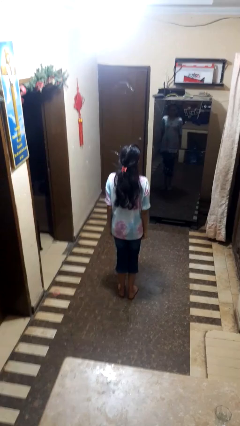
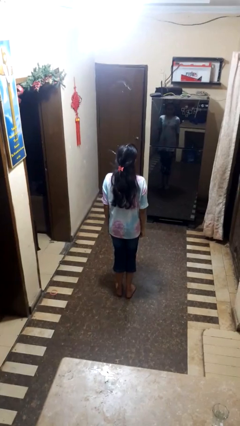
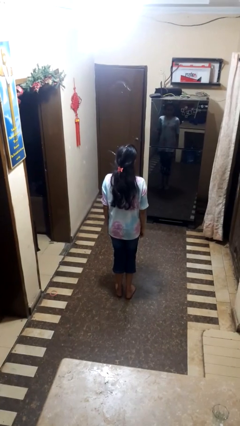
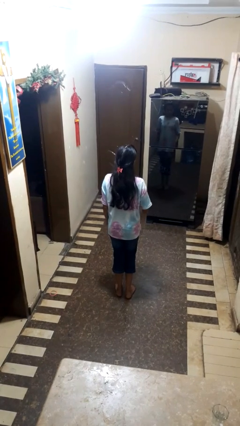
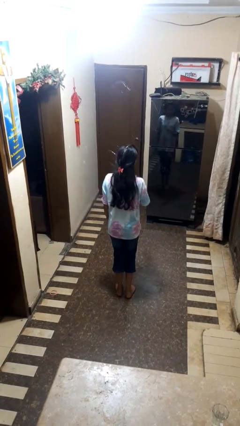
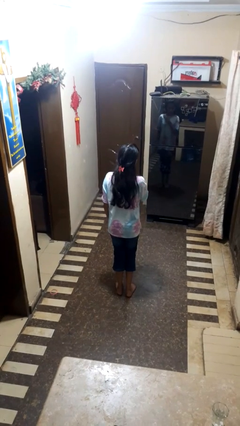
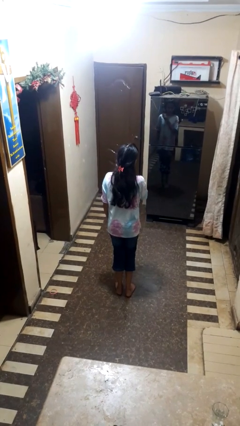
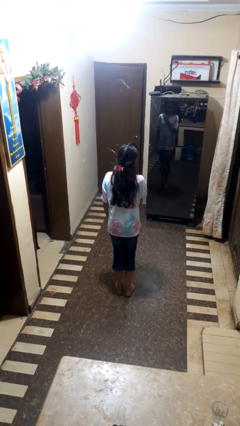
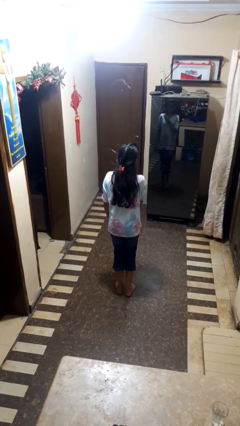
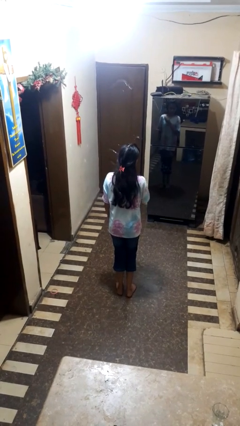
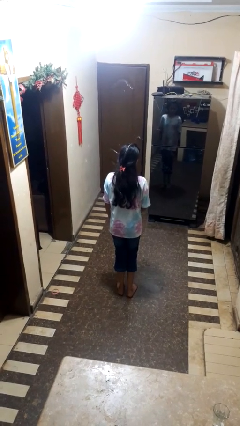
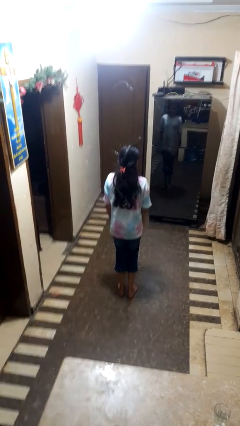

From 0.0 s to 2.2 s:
person drums on chest

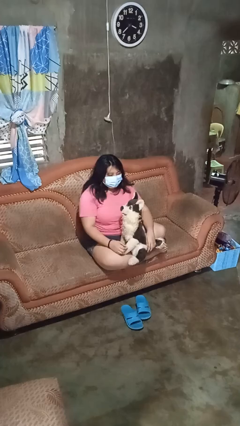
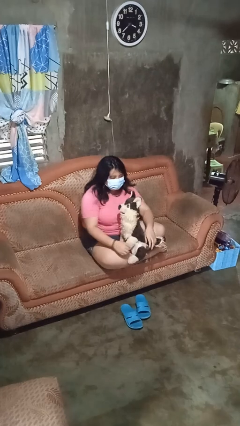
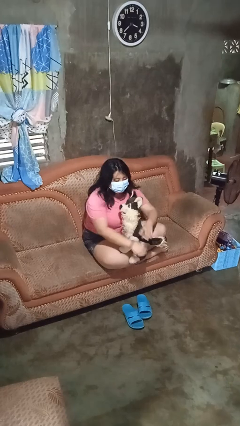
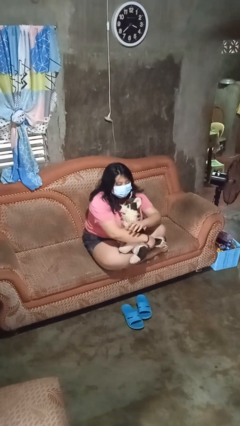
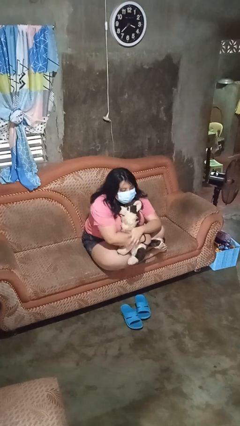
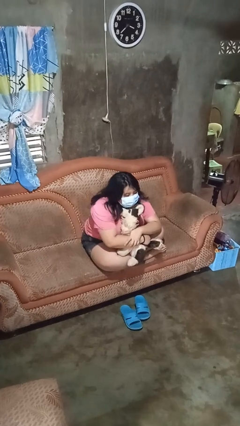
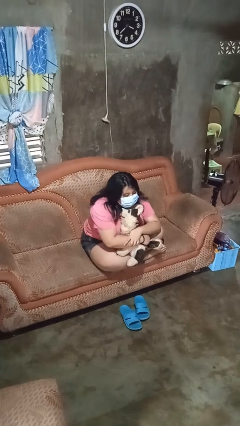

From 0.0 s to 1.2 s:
person hugs stuffed animal

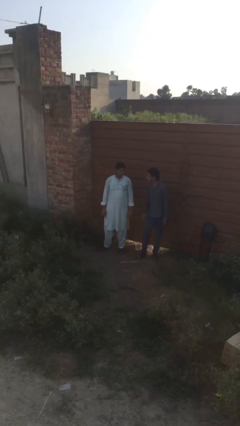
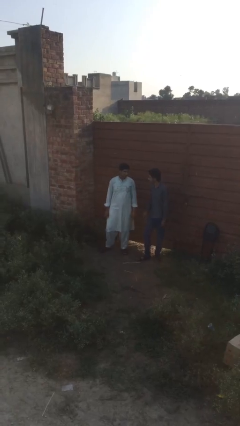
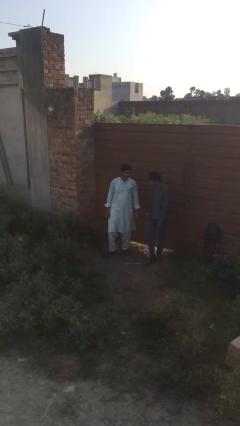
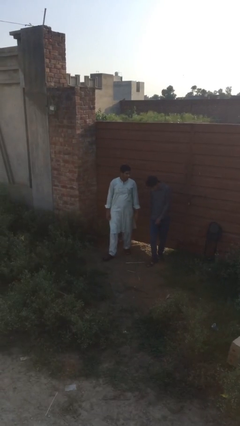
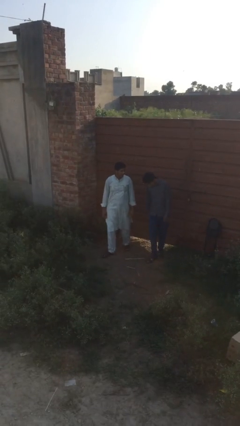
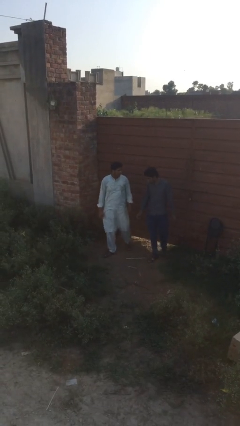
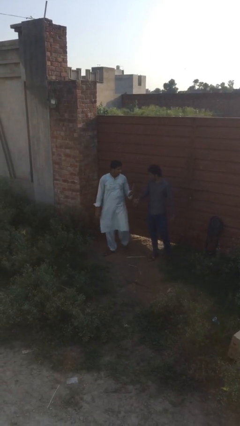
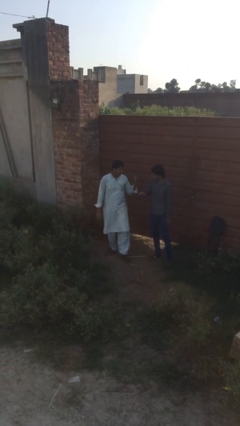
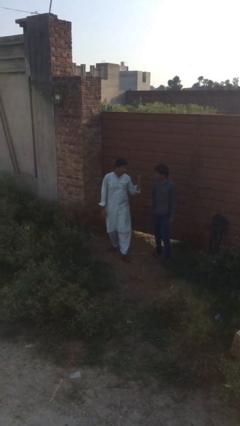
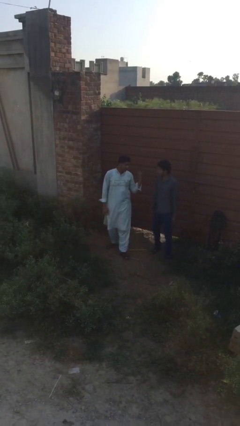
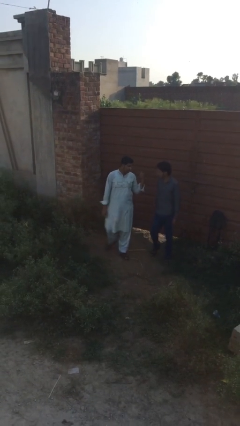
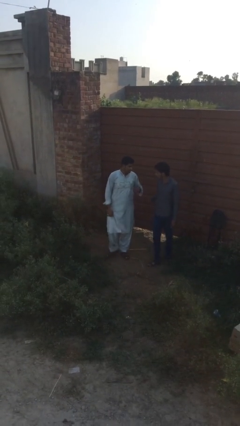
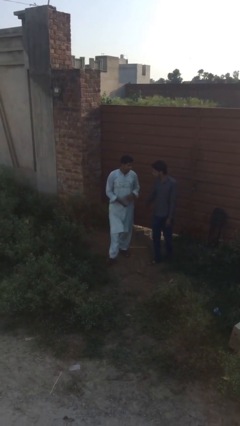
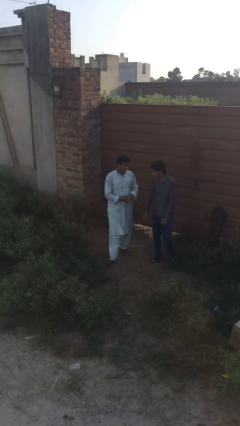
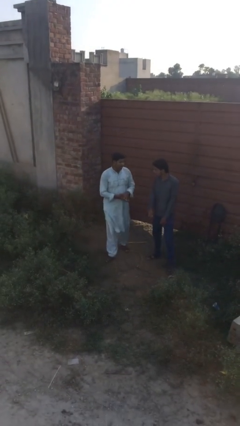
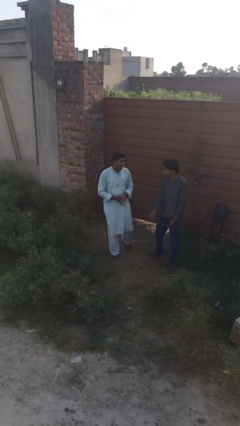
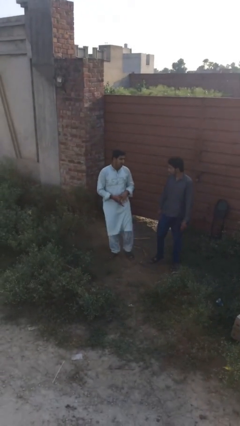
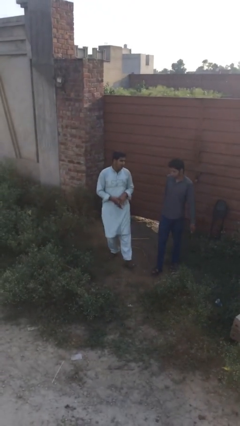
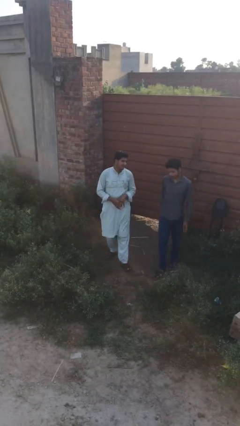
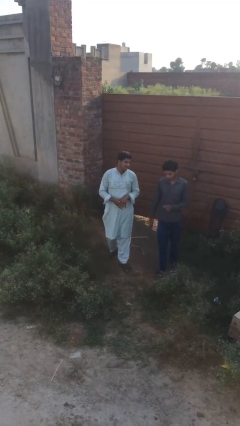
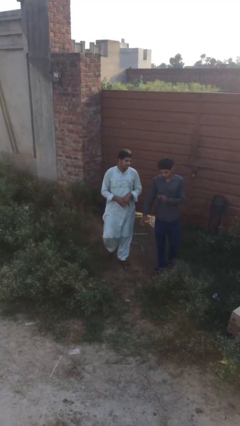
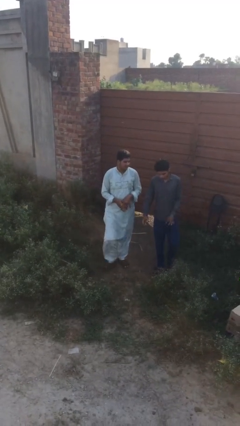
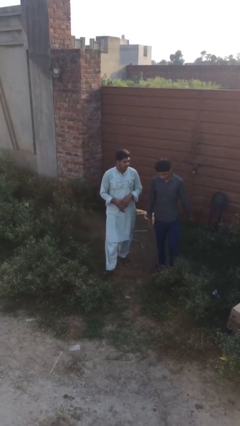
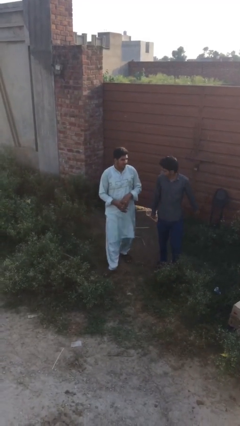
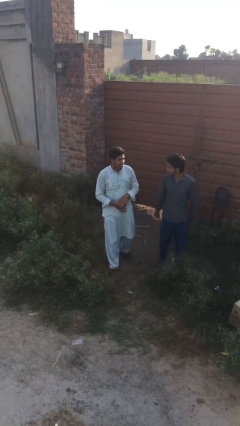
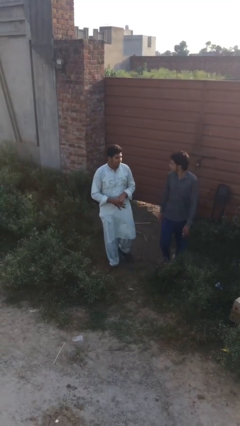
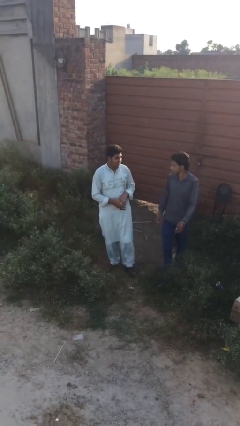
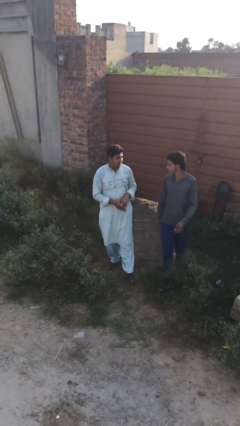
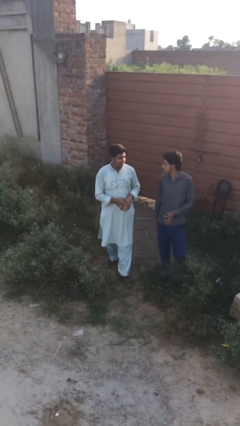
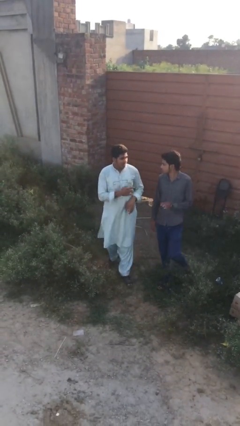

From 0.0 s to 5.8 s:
person talks to person

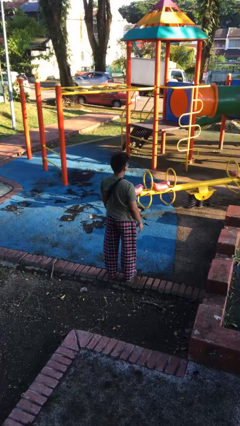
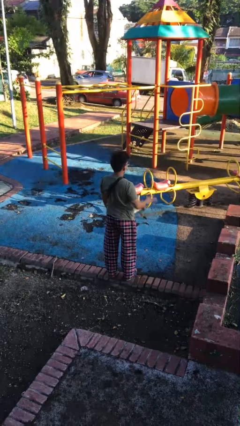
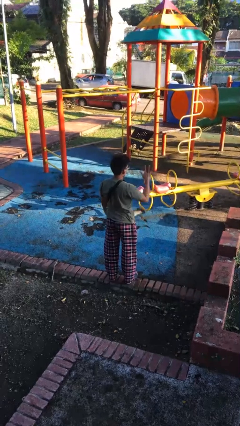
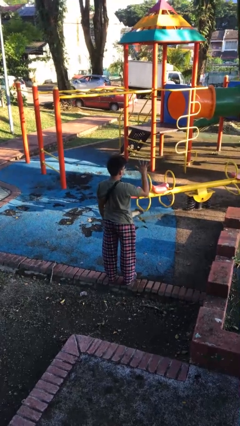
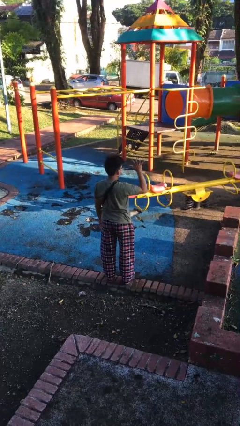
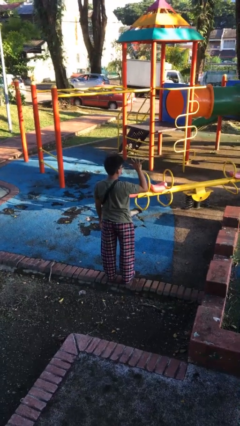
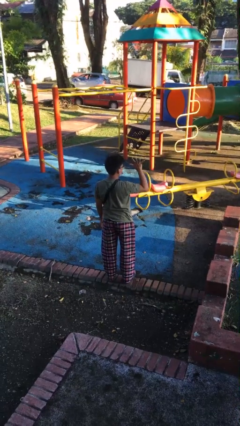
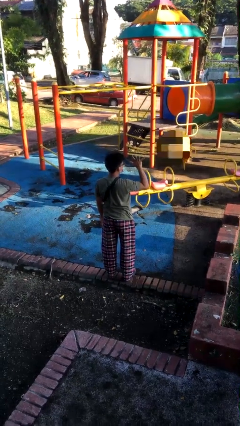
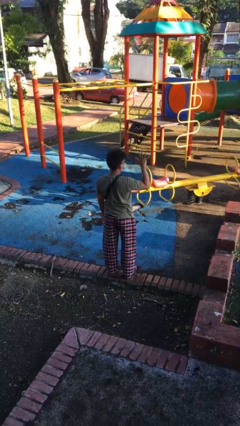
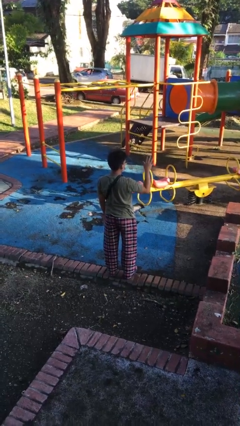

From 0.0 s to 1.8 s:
person gestures number five

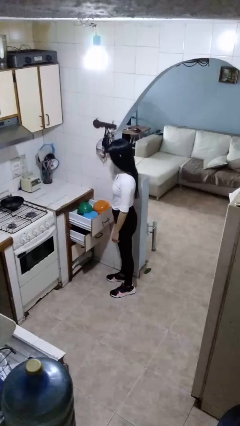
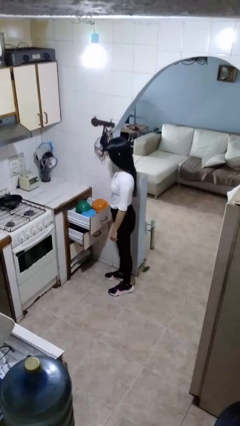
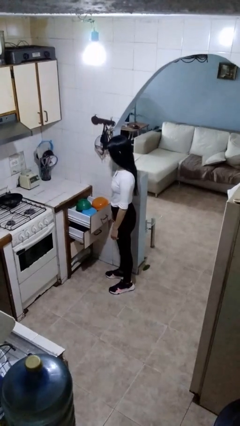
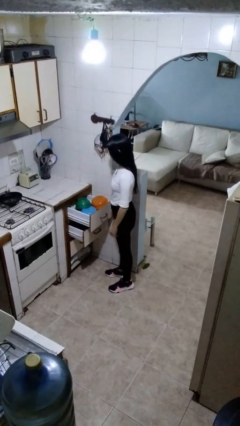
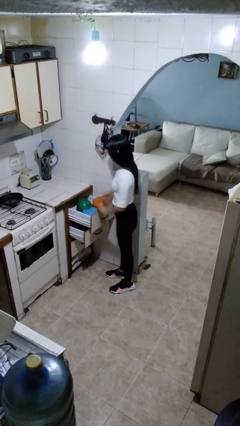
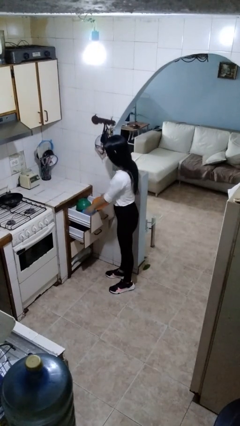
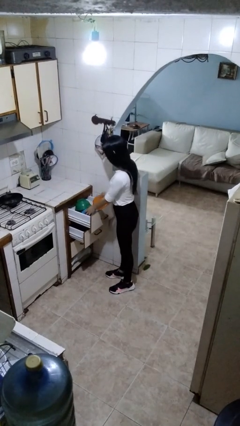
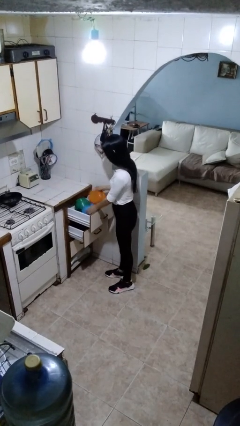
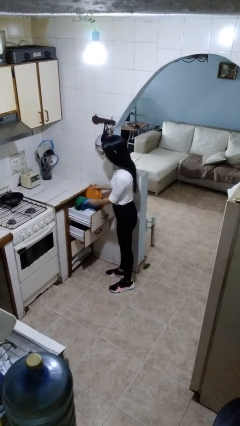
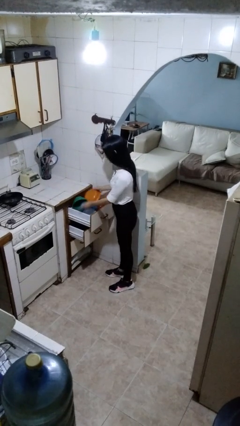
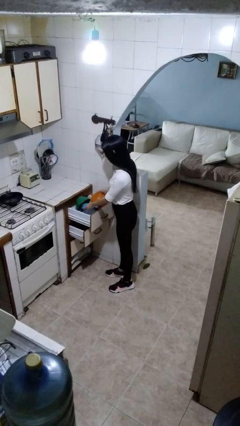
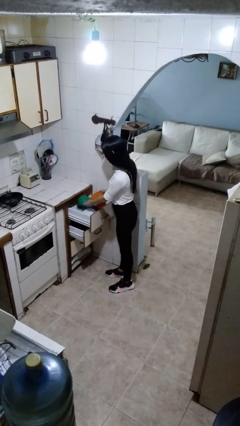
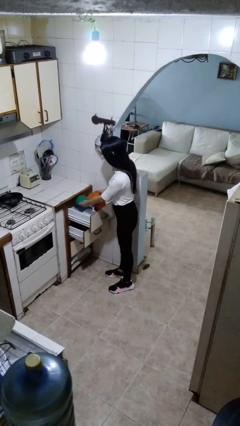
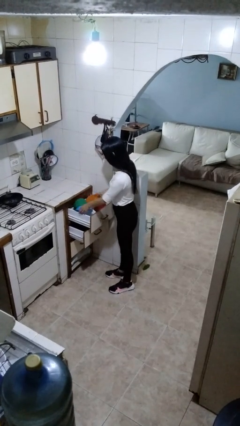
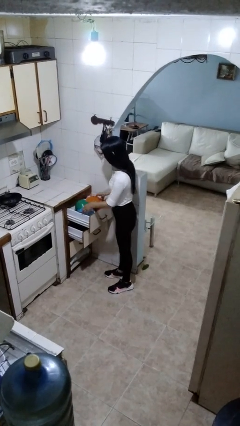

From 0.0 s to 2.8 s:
person searches in kitchen drawer

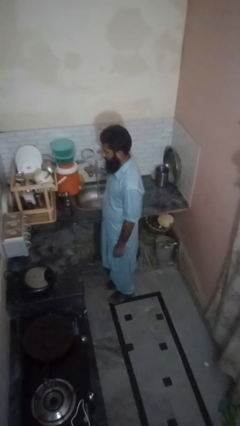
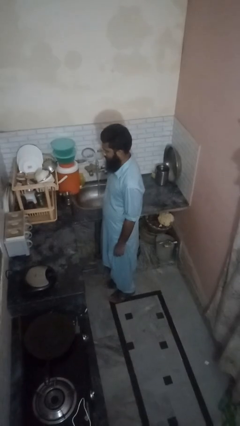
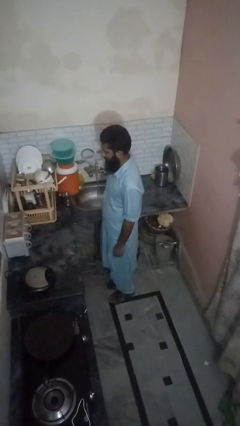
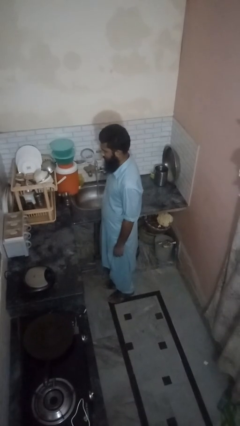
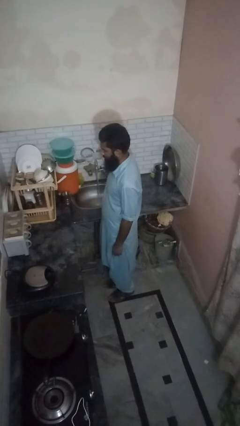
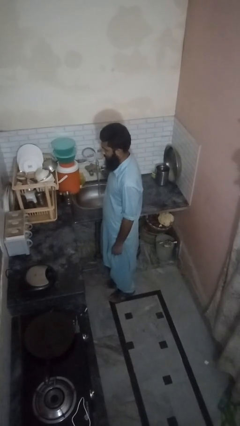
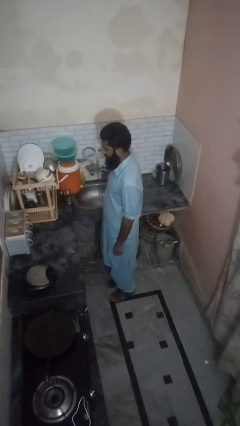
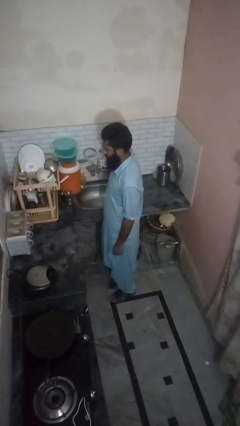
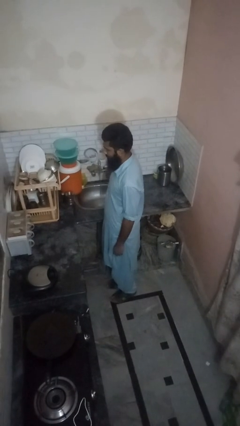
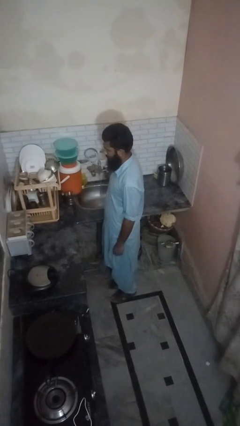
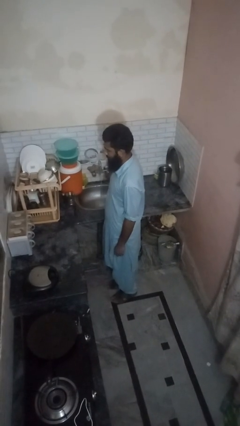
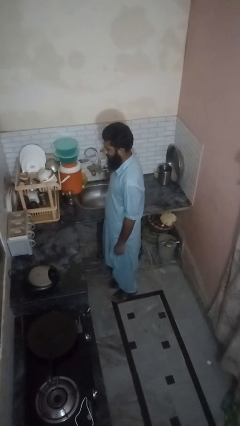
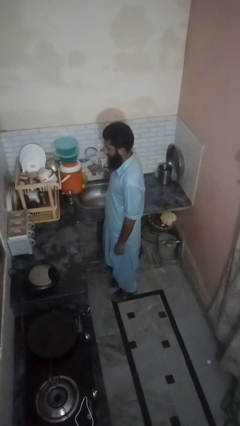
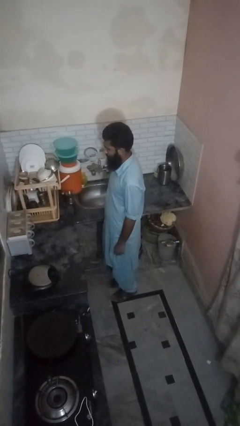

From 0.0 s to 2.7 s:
person turns off faucet

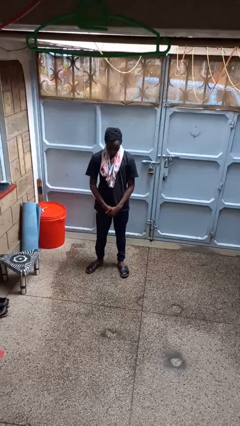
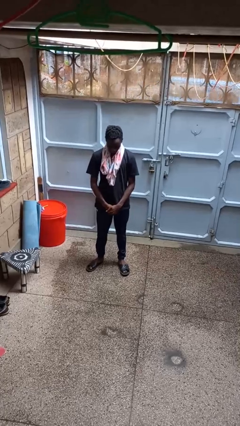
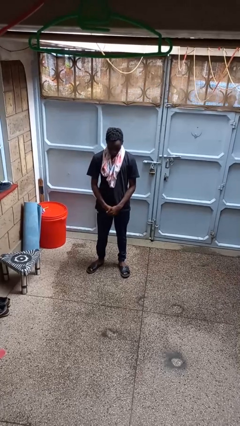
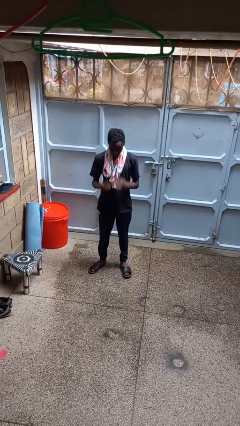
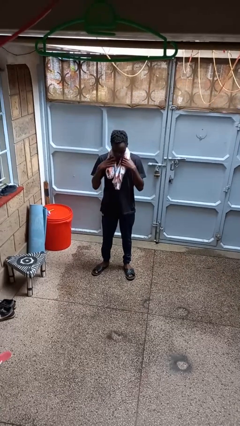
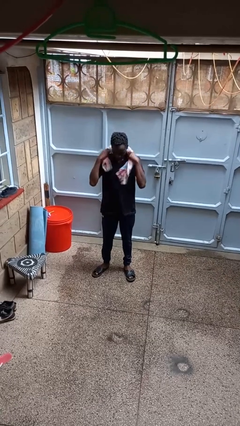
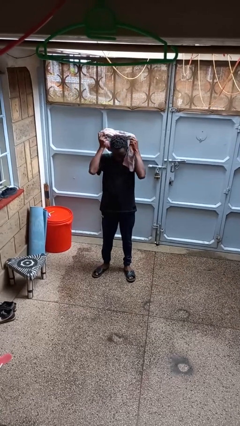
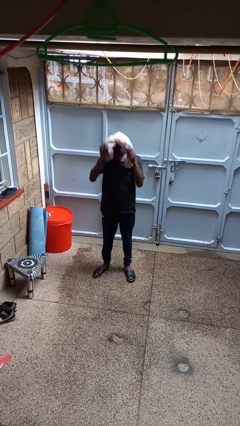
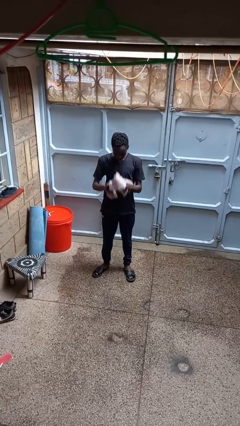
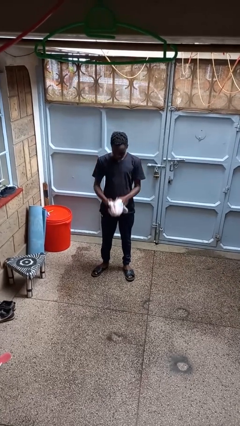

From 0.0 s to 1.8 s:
person takes off scarf
